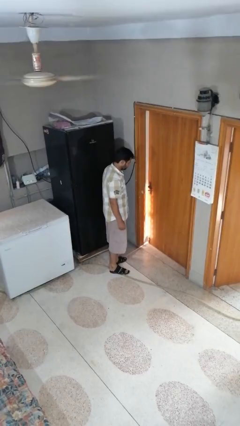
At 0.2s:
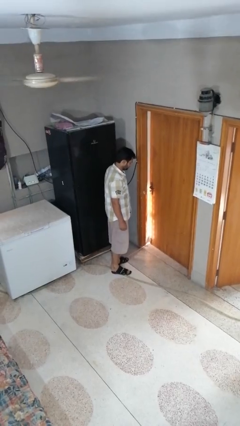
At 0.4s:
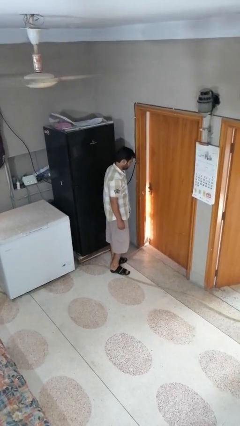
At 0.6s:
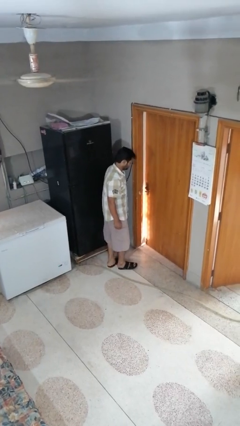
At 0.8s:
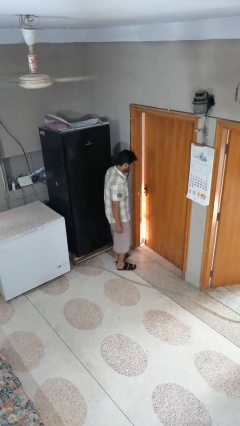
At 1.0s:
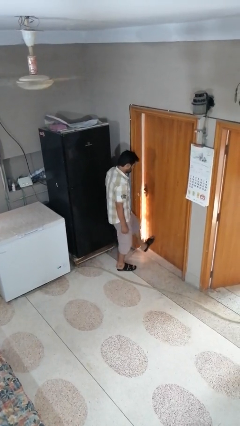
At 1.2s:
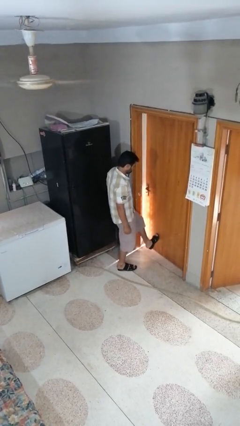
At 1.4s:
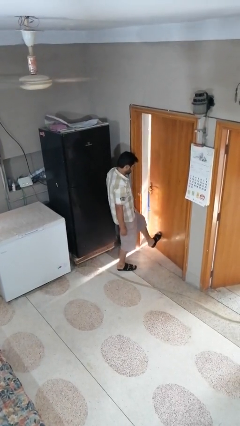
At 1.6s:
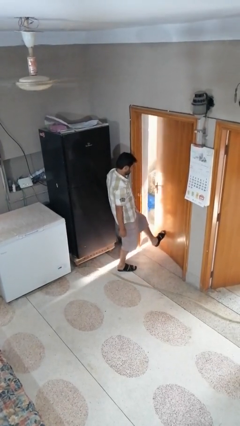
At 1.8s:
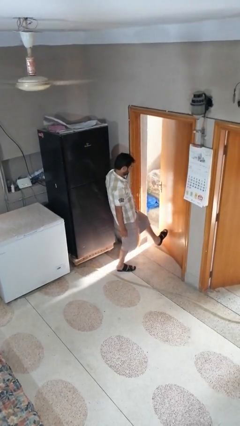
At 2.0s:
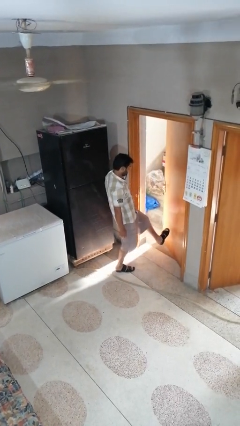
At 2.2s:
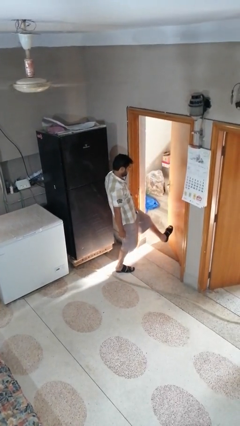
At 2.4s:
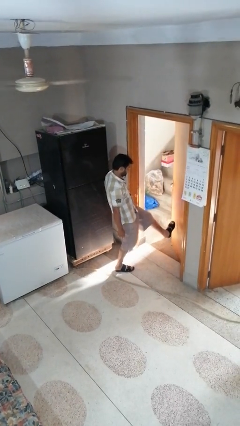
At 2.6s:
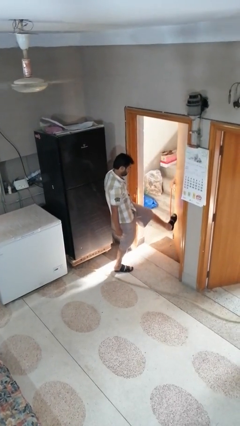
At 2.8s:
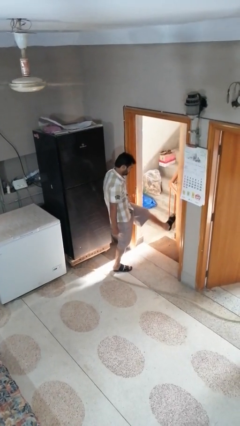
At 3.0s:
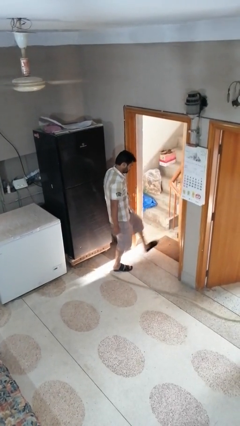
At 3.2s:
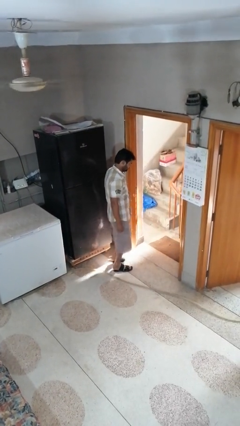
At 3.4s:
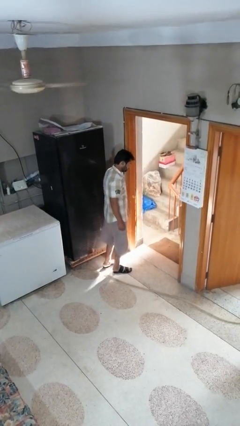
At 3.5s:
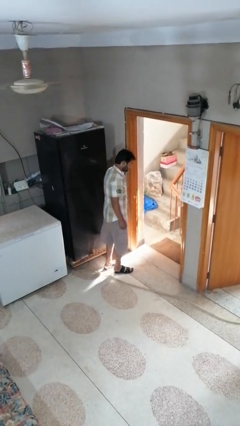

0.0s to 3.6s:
person opens facility door

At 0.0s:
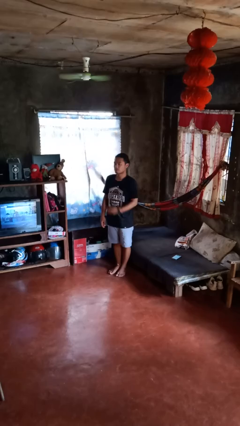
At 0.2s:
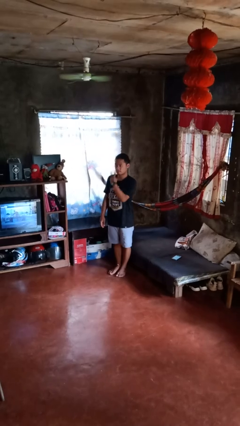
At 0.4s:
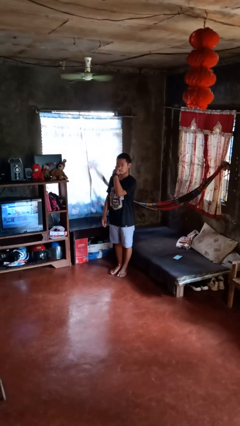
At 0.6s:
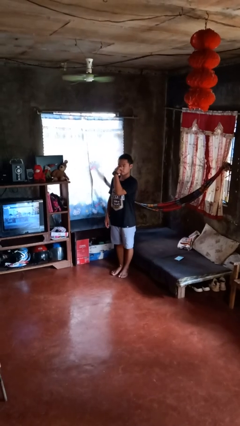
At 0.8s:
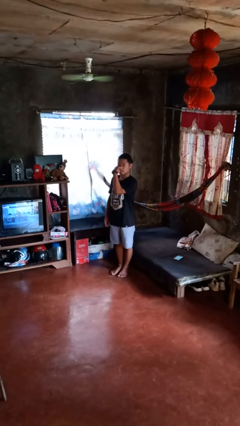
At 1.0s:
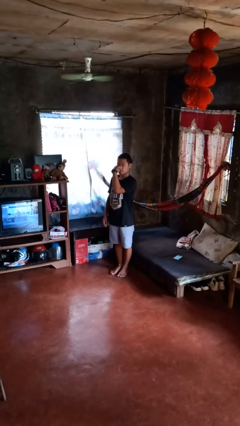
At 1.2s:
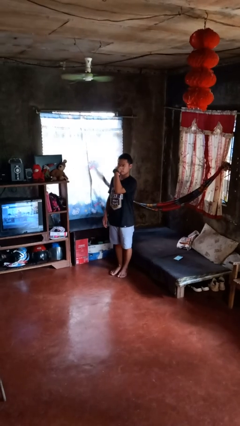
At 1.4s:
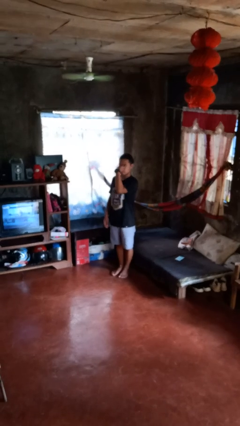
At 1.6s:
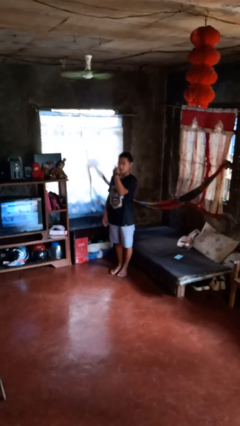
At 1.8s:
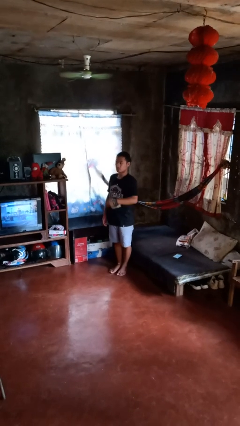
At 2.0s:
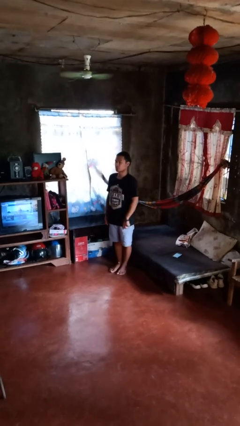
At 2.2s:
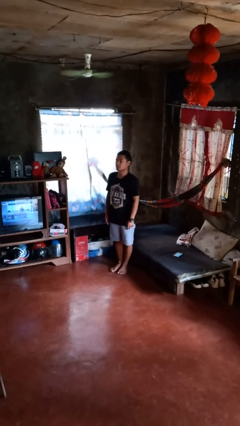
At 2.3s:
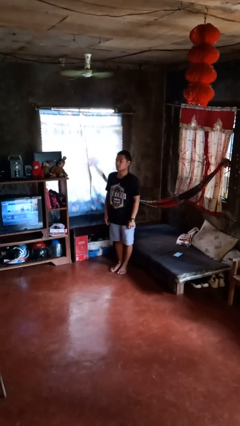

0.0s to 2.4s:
person gestures watch closely

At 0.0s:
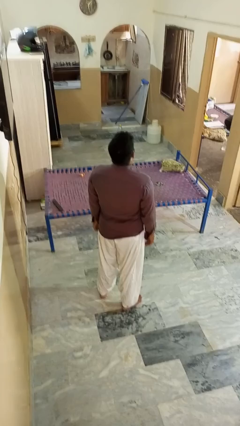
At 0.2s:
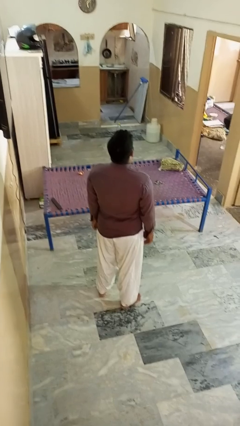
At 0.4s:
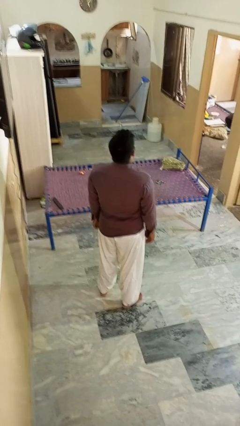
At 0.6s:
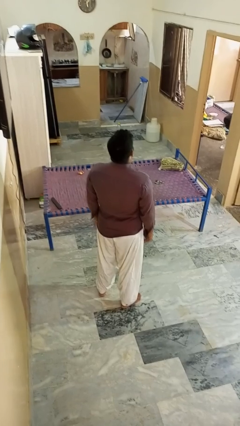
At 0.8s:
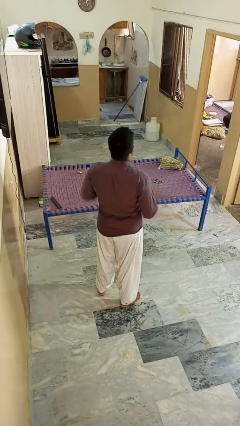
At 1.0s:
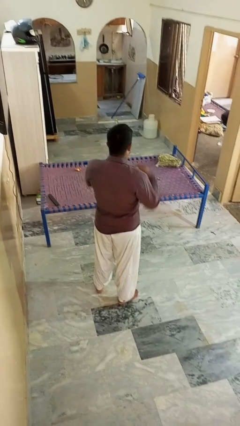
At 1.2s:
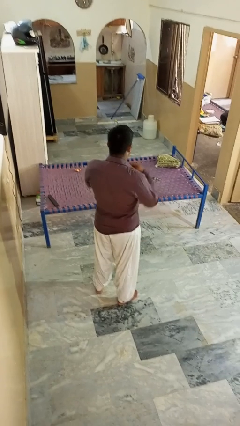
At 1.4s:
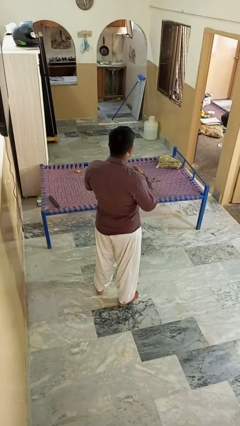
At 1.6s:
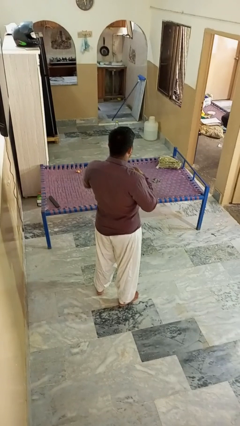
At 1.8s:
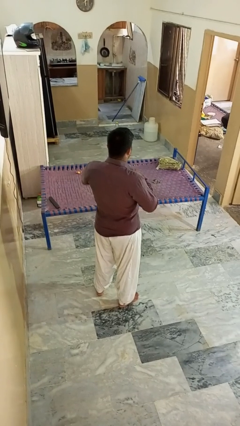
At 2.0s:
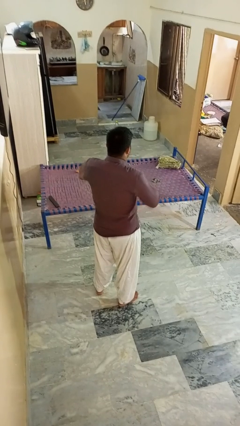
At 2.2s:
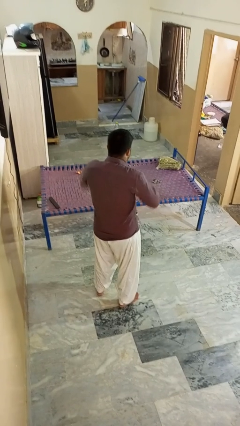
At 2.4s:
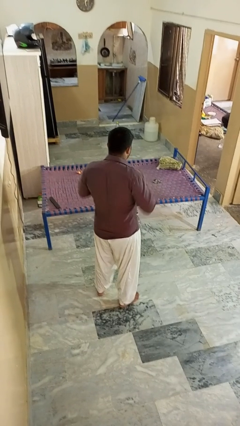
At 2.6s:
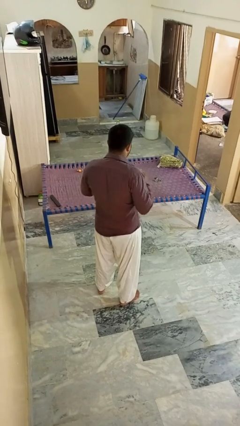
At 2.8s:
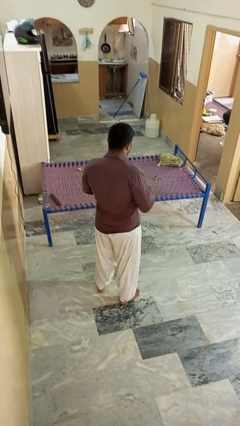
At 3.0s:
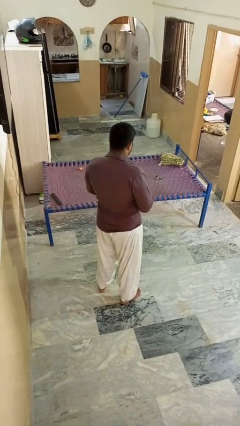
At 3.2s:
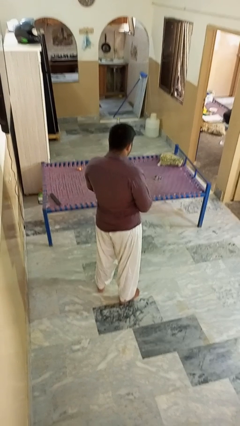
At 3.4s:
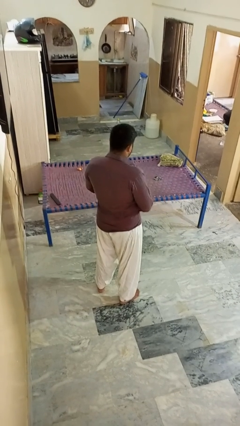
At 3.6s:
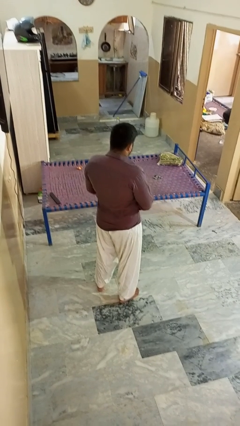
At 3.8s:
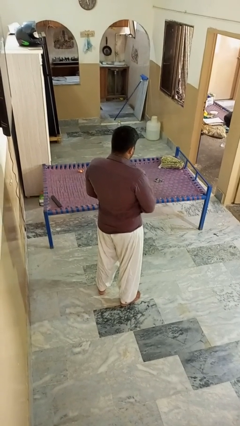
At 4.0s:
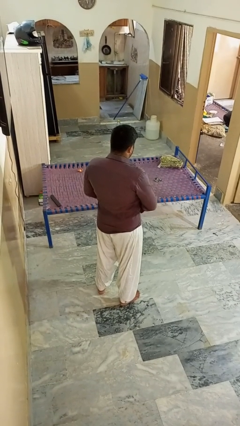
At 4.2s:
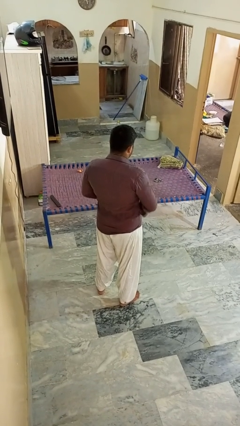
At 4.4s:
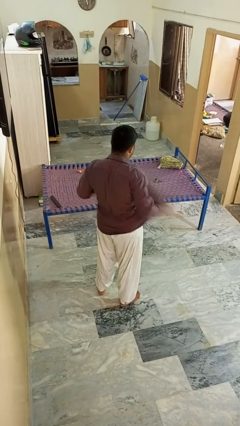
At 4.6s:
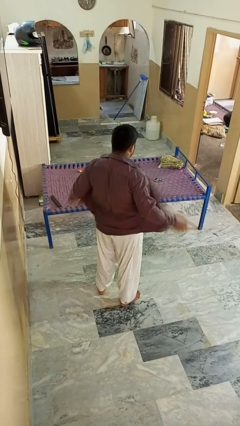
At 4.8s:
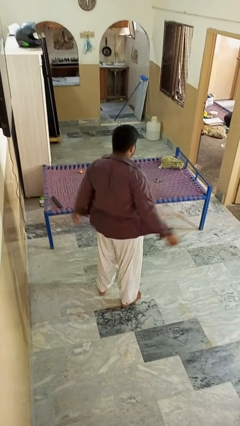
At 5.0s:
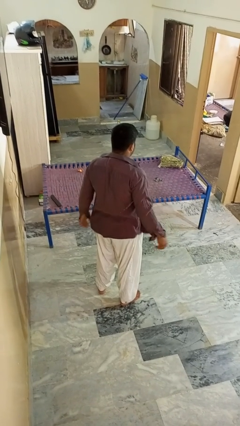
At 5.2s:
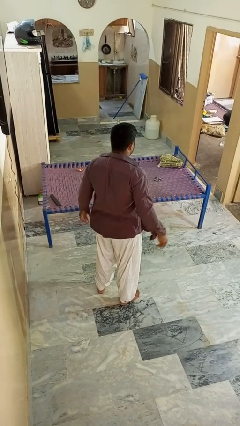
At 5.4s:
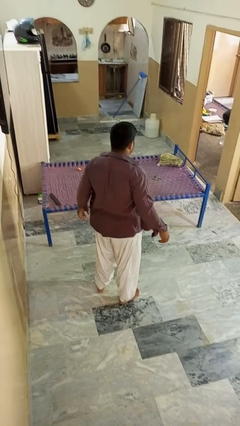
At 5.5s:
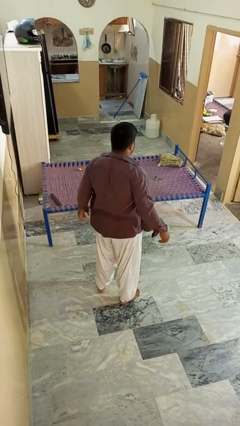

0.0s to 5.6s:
person unbuttons shirt

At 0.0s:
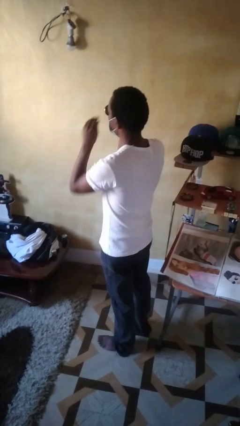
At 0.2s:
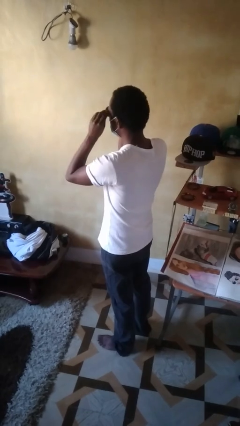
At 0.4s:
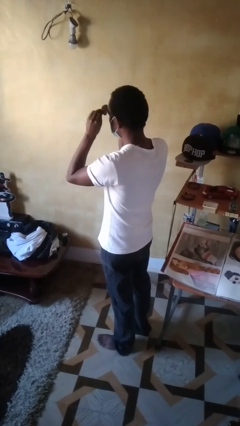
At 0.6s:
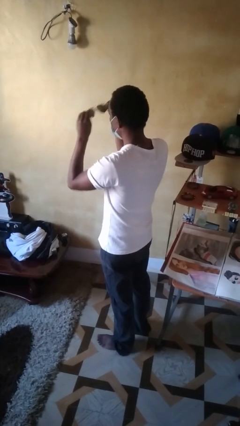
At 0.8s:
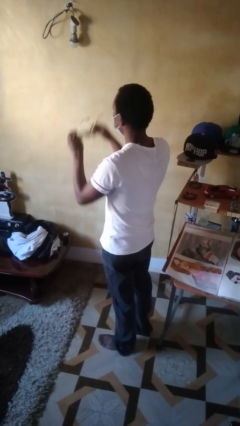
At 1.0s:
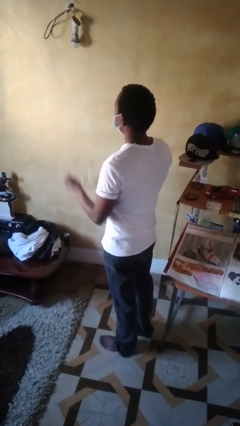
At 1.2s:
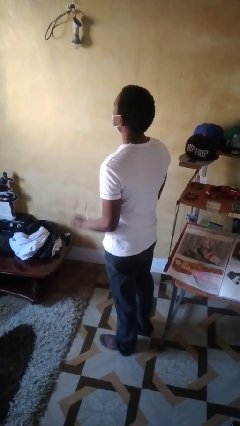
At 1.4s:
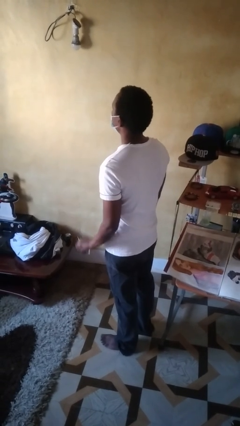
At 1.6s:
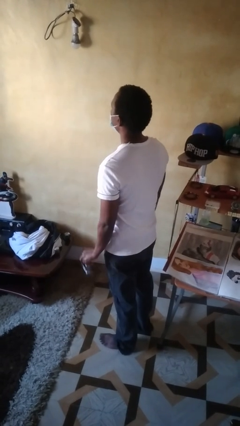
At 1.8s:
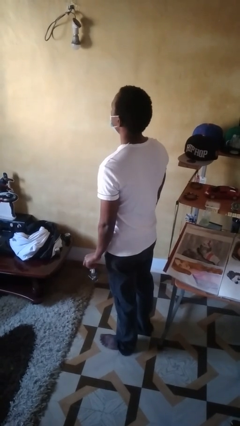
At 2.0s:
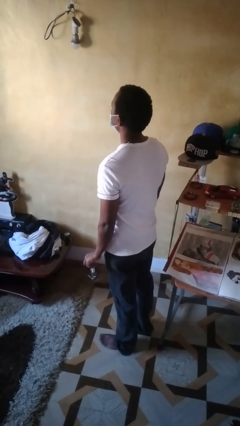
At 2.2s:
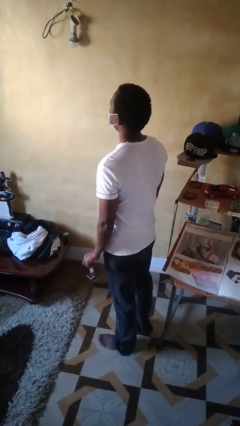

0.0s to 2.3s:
person takes off sunglasses

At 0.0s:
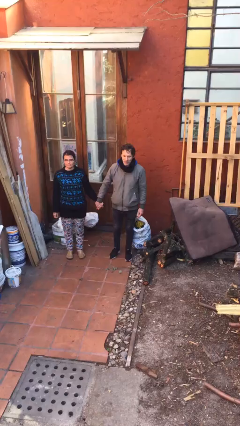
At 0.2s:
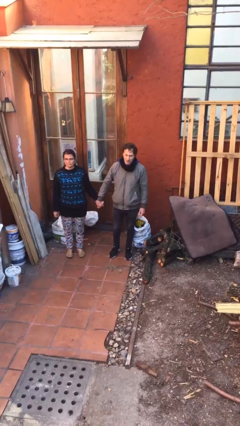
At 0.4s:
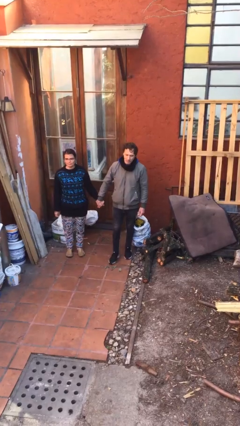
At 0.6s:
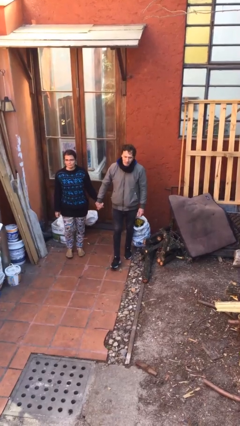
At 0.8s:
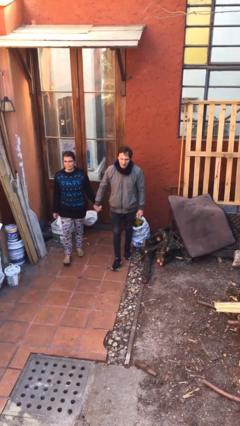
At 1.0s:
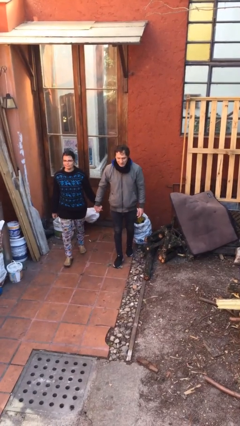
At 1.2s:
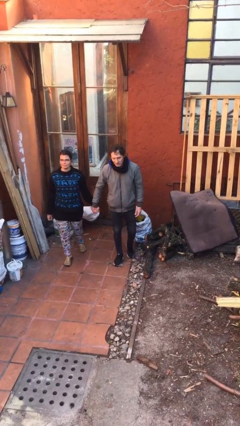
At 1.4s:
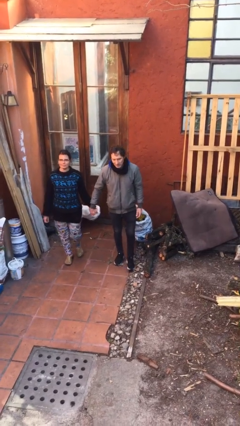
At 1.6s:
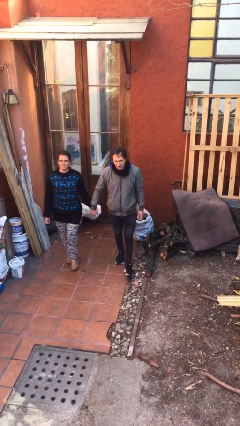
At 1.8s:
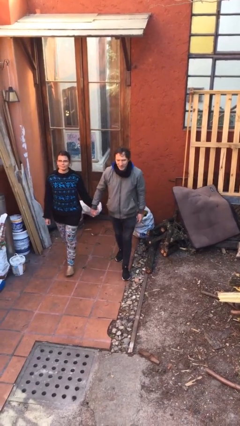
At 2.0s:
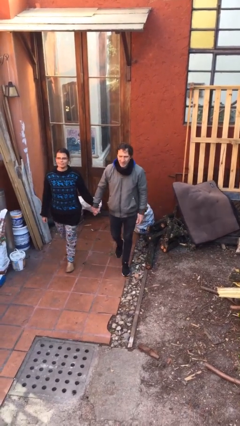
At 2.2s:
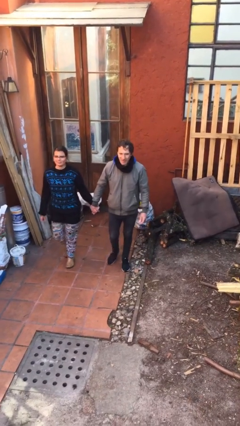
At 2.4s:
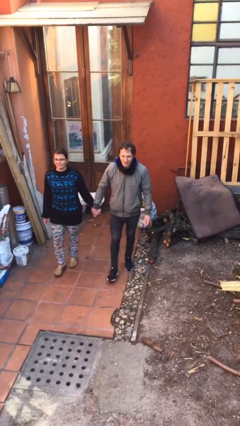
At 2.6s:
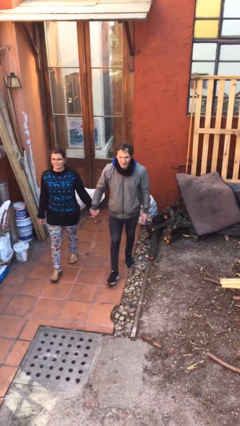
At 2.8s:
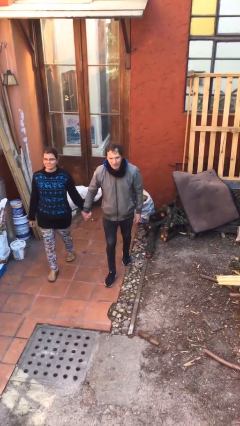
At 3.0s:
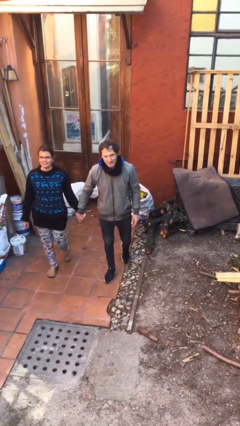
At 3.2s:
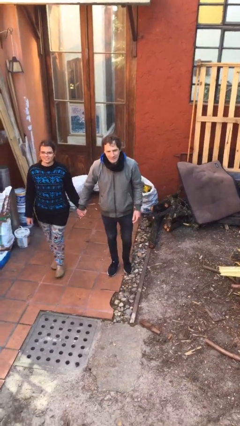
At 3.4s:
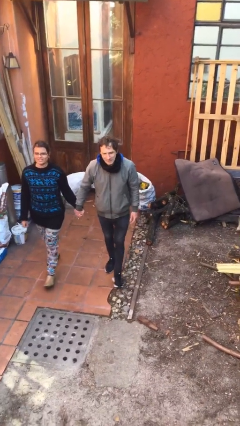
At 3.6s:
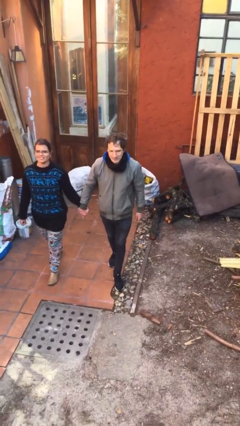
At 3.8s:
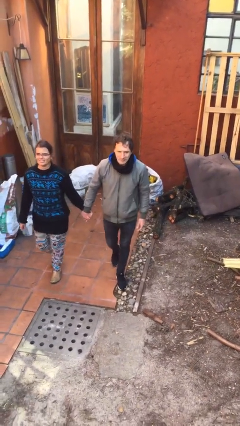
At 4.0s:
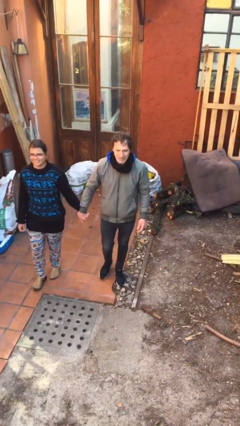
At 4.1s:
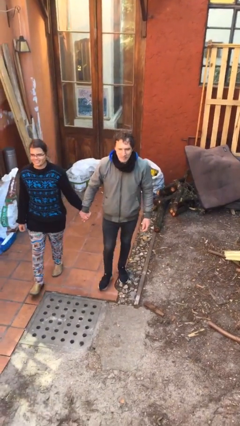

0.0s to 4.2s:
person holds hand
